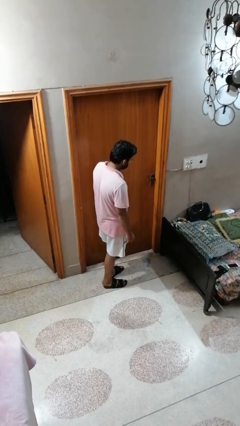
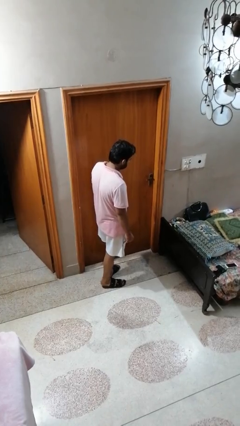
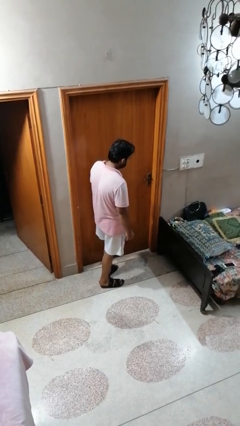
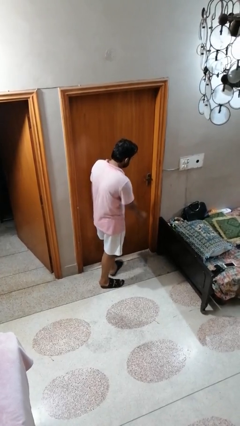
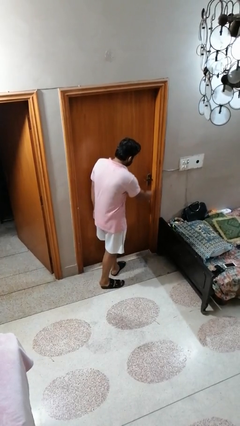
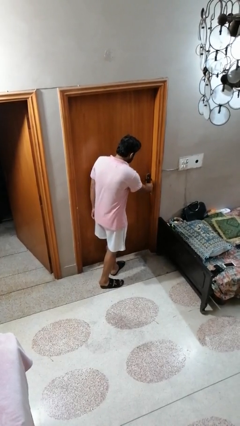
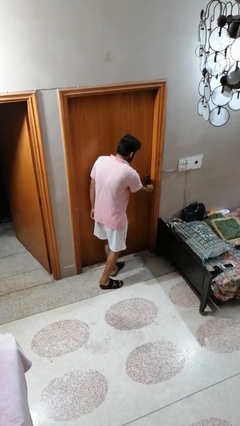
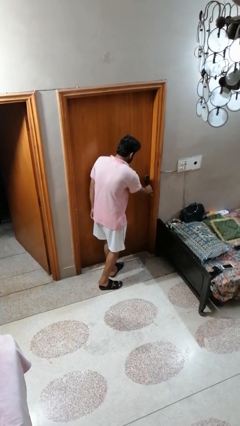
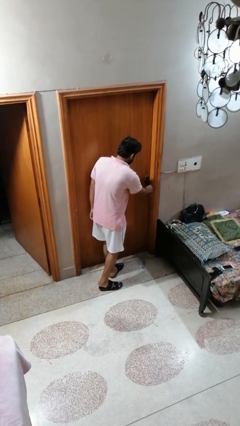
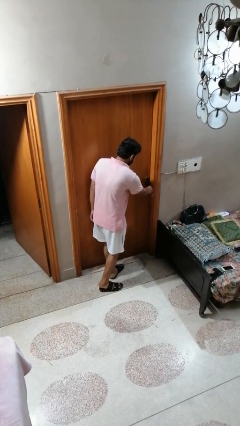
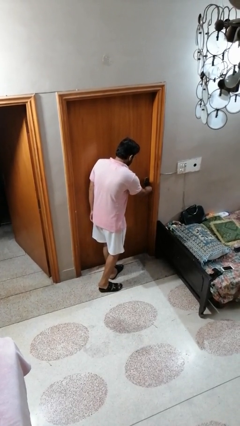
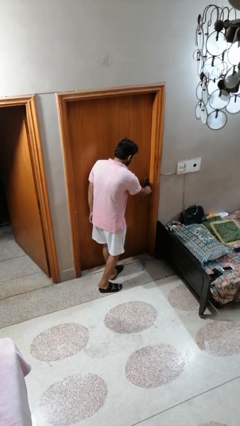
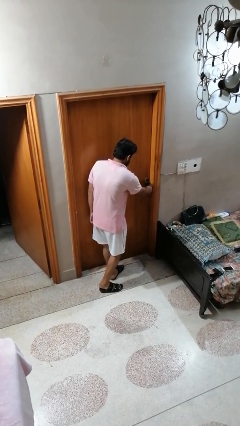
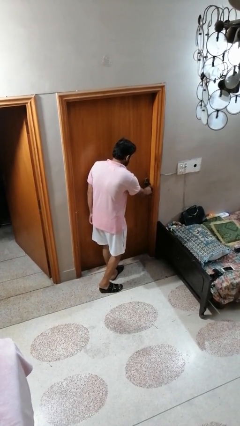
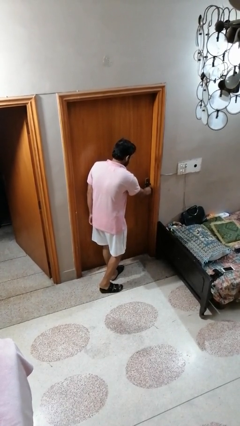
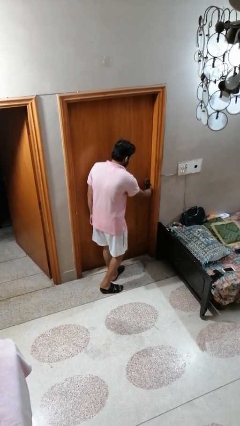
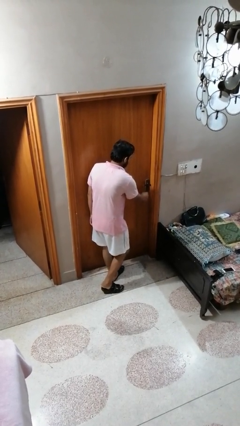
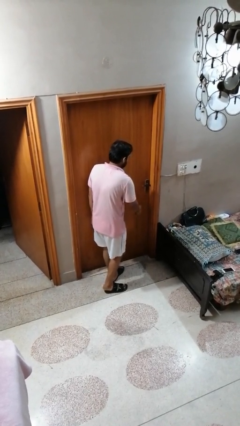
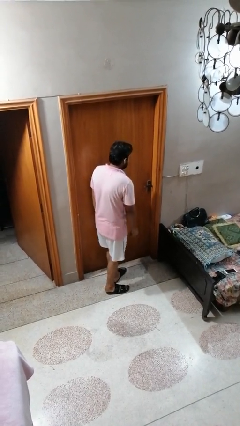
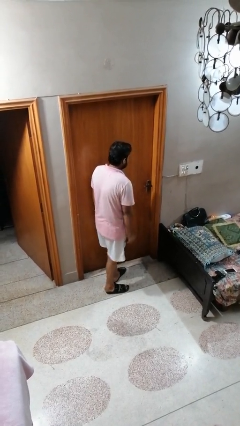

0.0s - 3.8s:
person unlocks door with keys

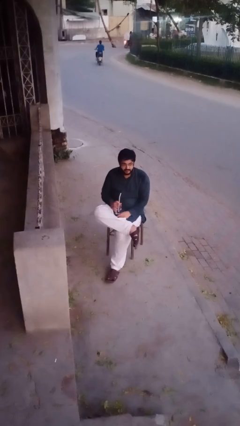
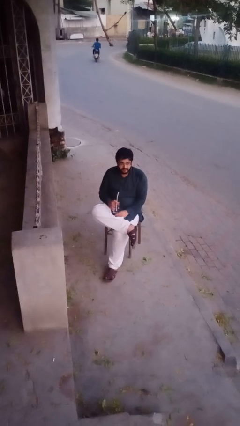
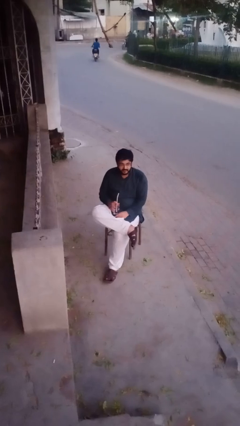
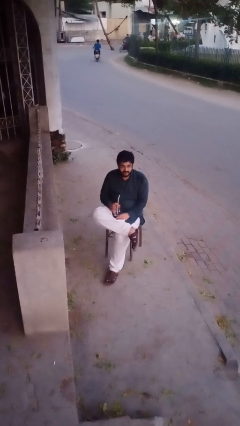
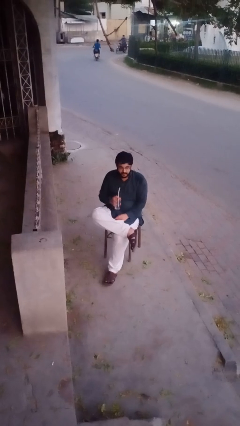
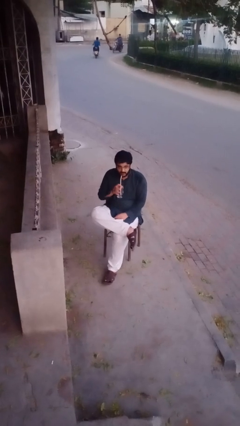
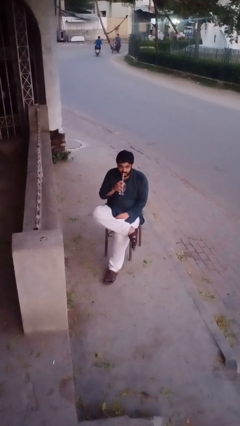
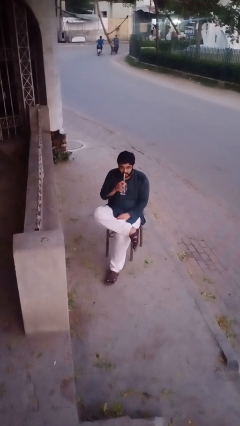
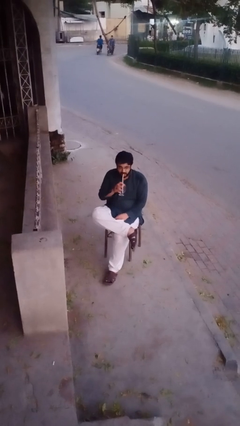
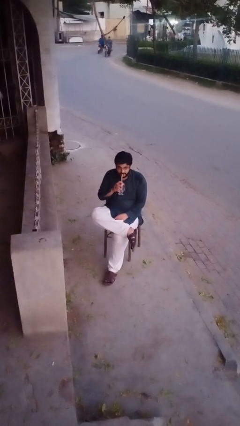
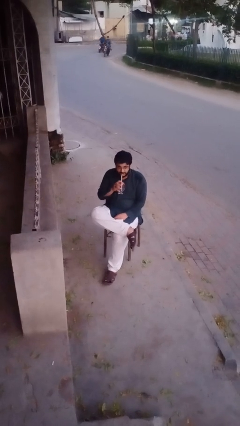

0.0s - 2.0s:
person drinks from straw

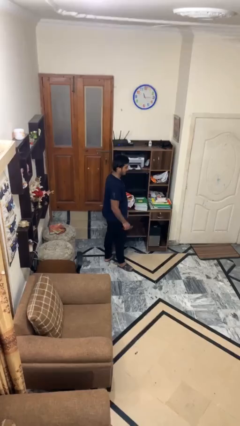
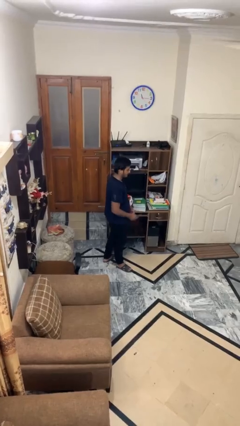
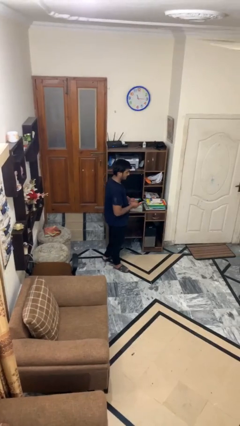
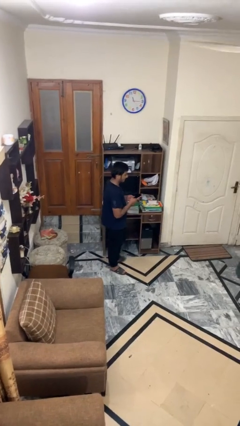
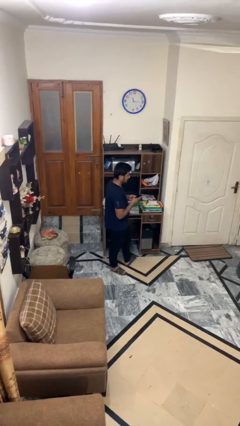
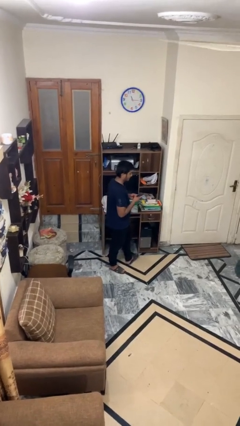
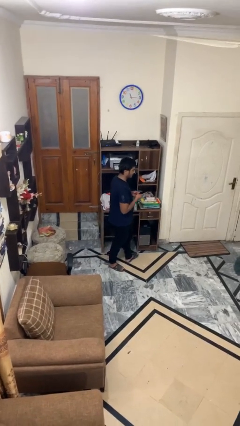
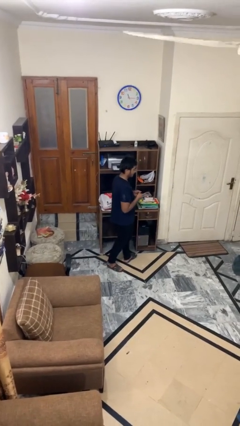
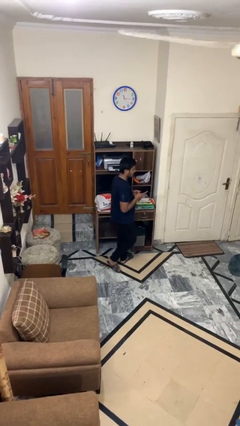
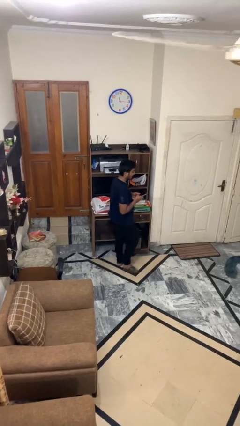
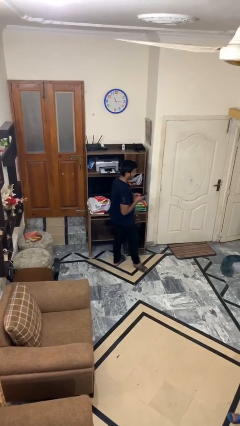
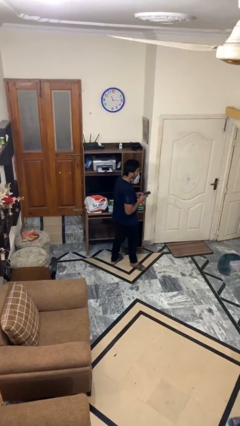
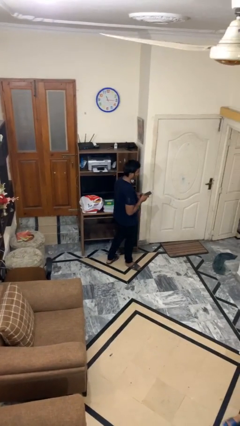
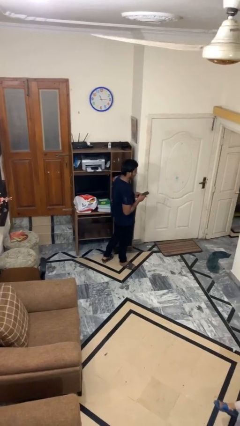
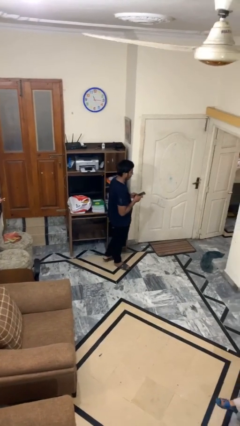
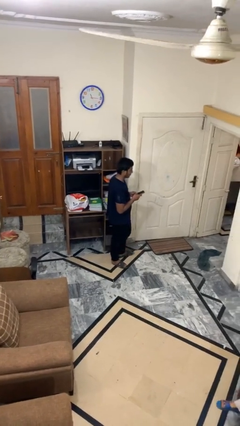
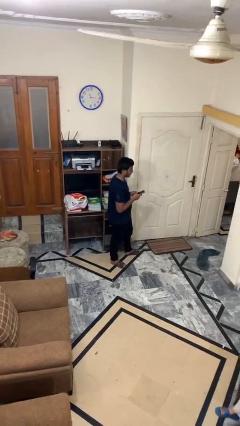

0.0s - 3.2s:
person texts on phone

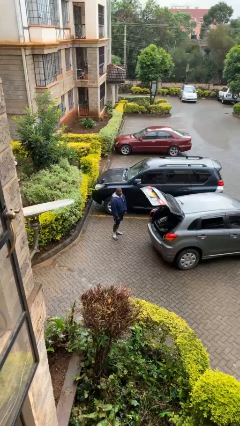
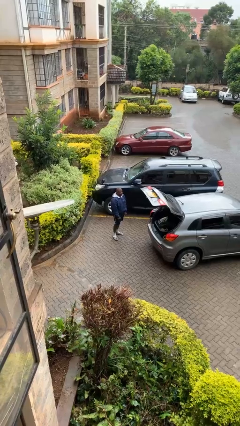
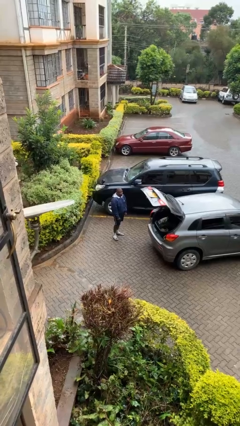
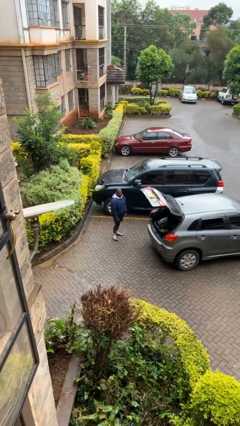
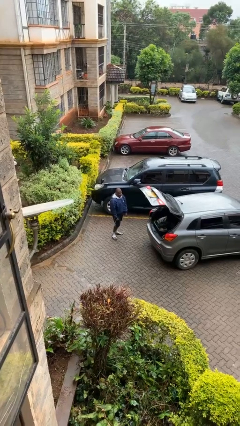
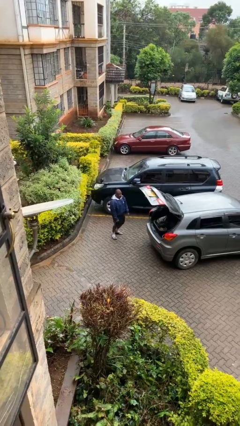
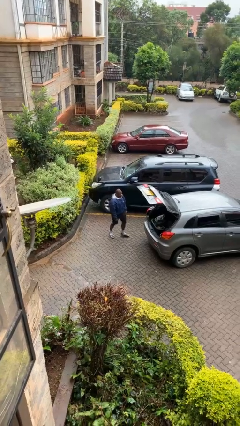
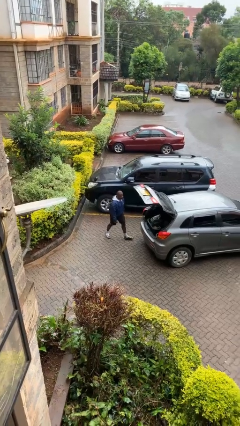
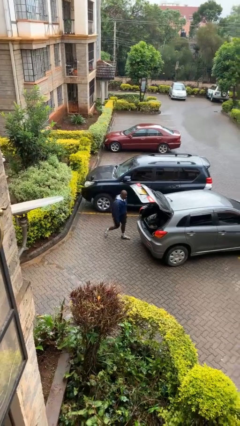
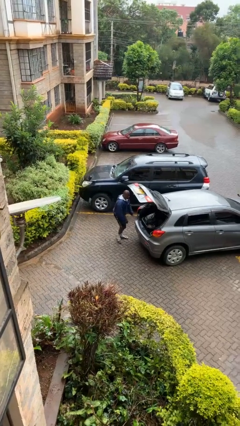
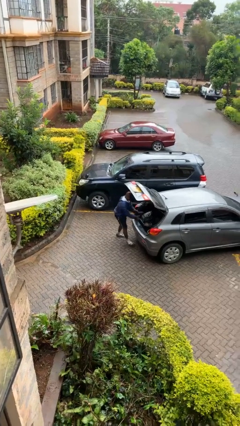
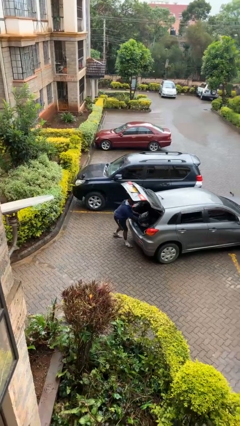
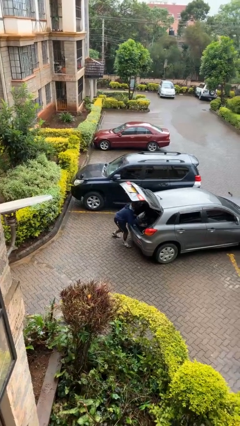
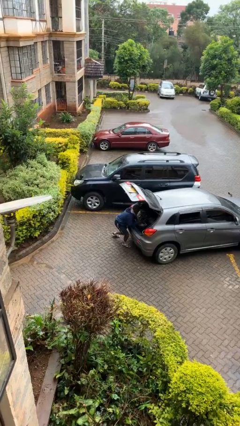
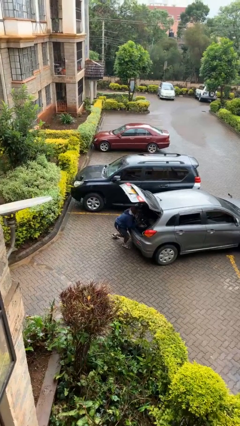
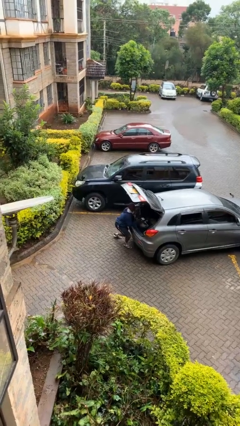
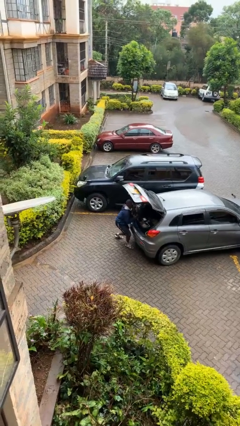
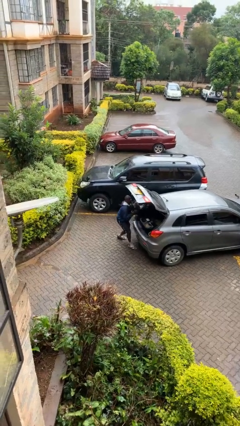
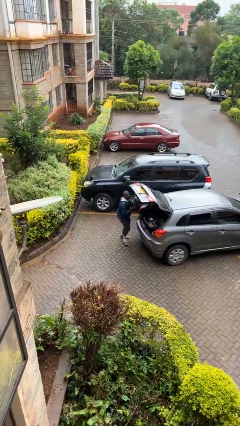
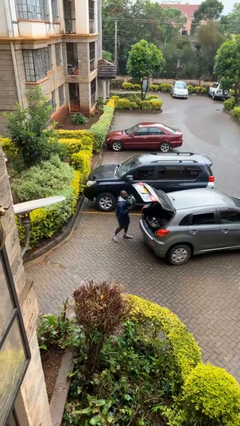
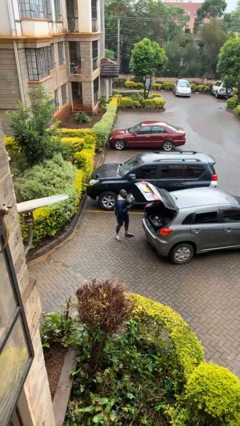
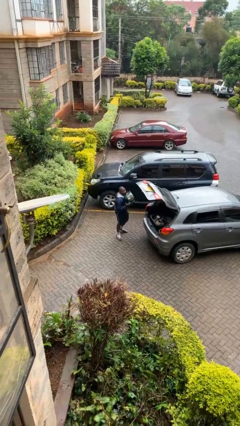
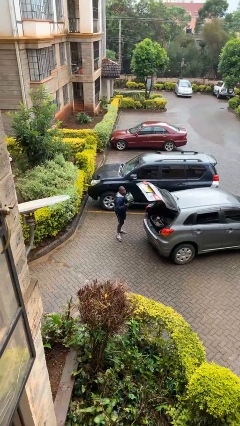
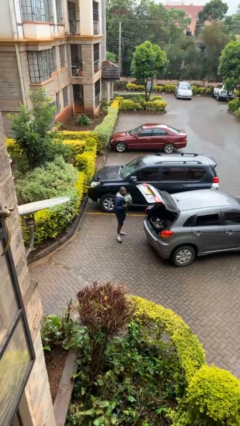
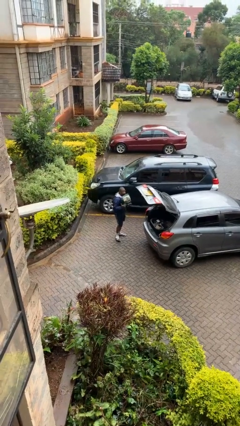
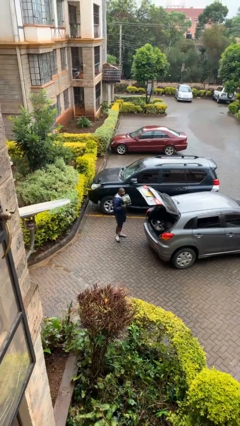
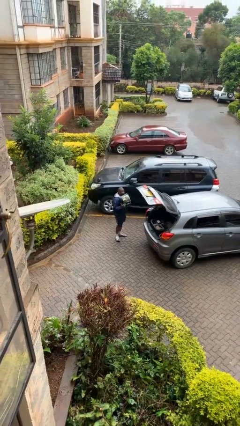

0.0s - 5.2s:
person unloads car

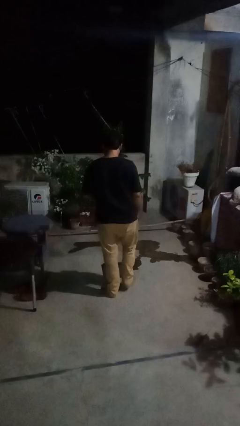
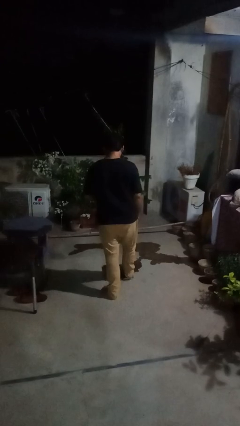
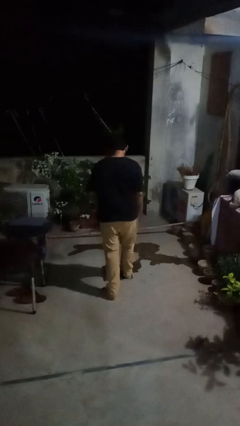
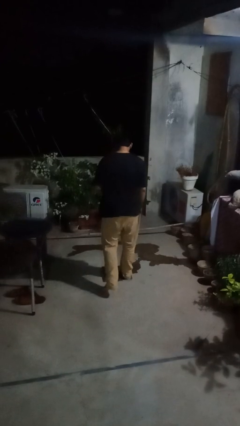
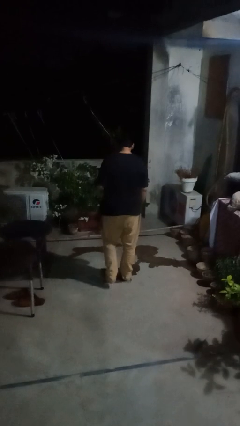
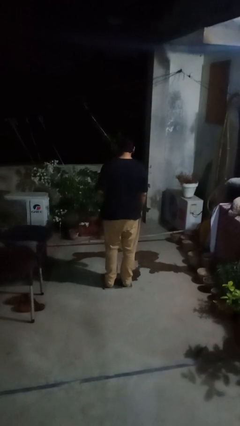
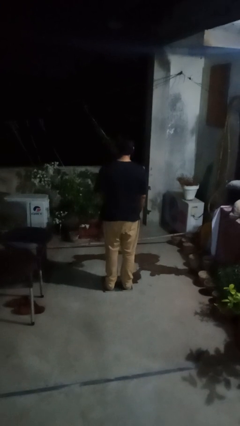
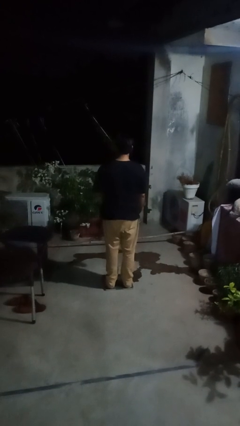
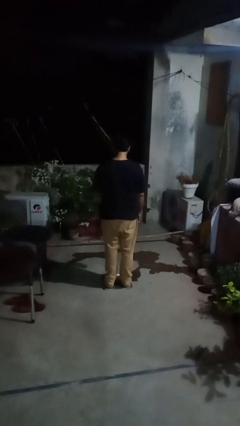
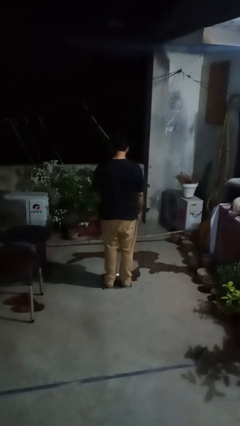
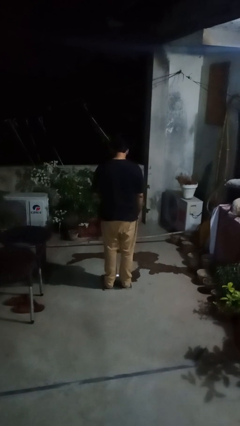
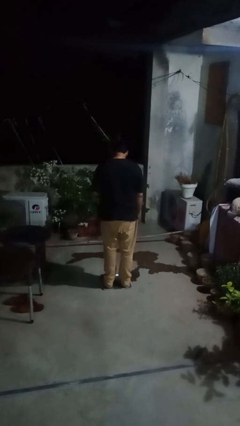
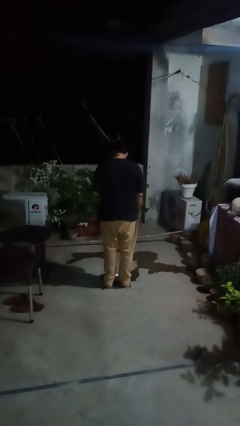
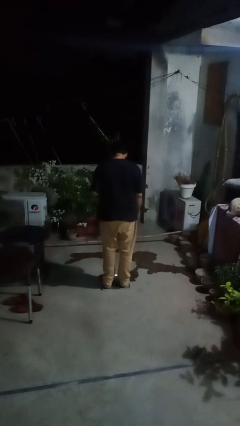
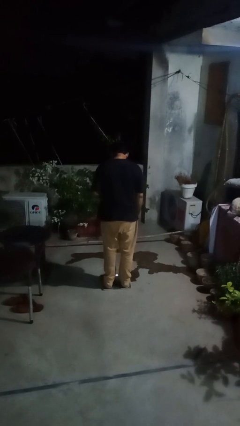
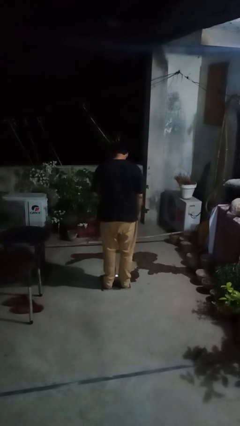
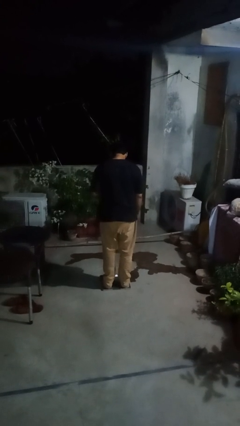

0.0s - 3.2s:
person uses bodyweight scale

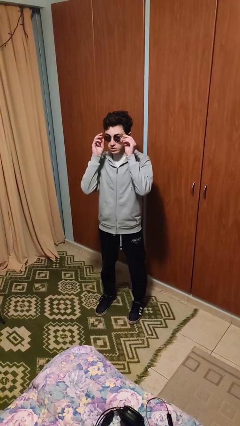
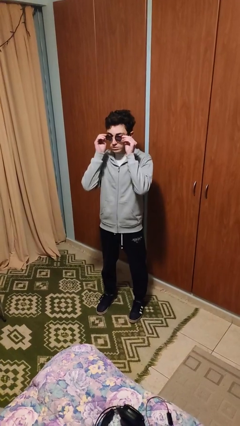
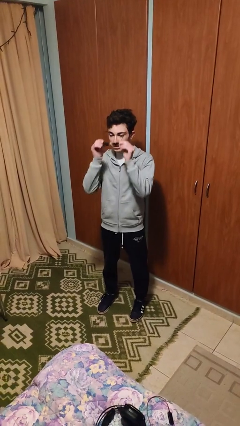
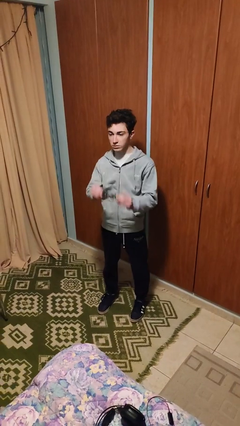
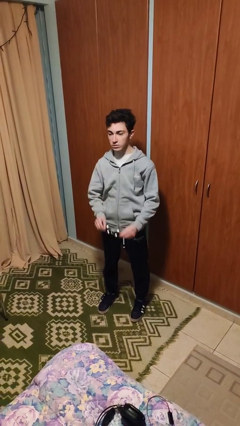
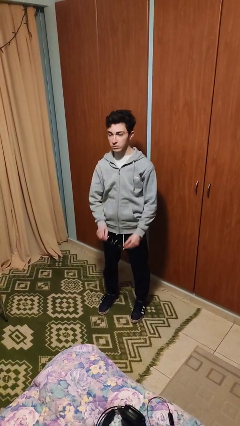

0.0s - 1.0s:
person takes off glasses
